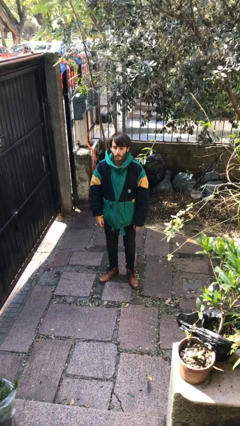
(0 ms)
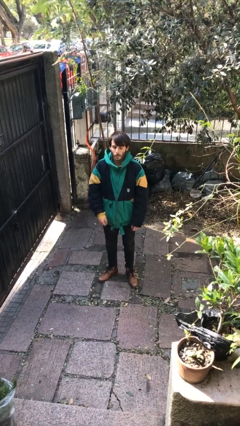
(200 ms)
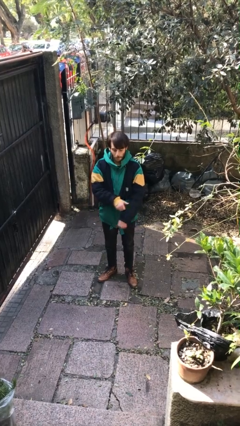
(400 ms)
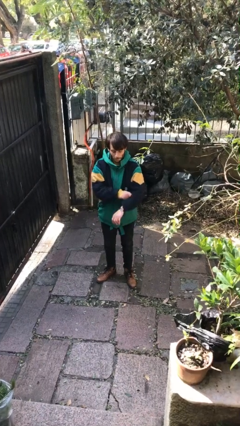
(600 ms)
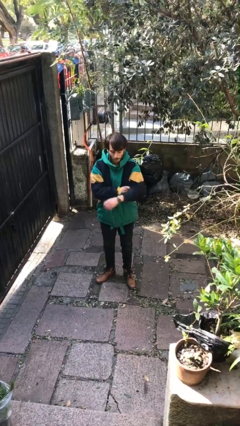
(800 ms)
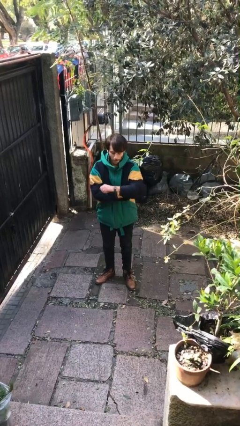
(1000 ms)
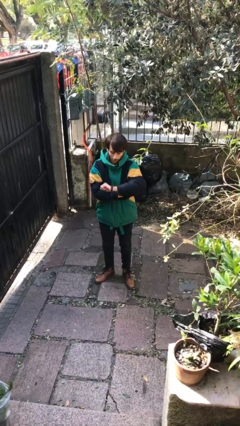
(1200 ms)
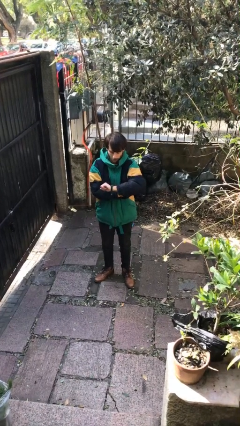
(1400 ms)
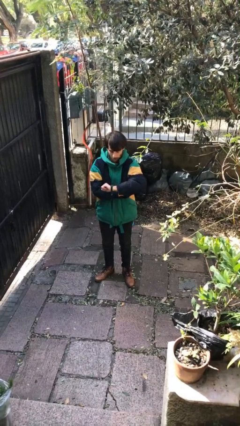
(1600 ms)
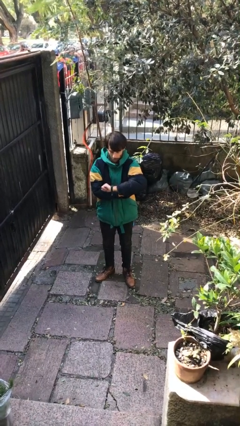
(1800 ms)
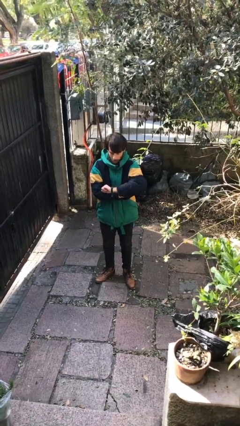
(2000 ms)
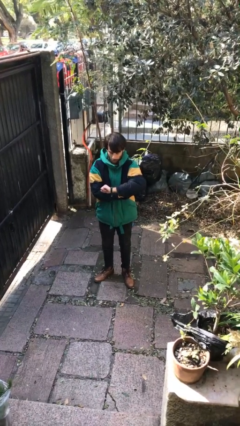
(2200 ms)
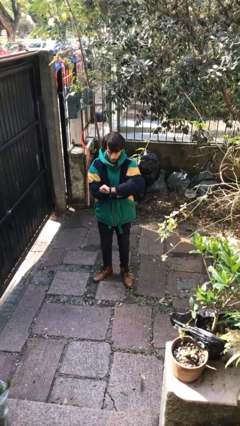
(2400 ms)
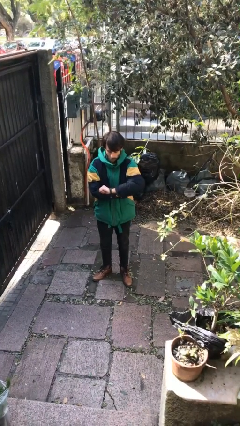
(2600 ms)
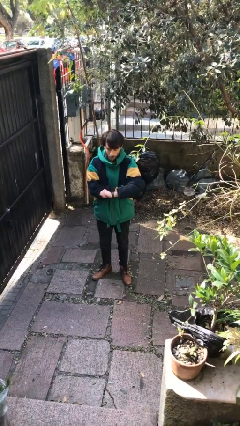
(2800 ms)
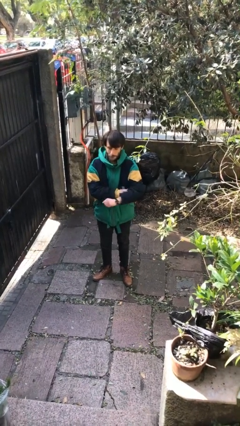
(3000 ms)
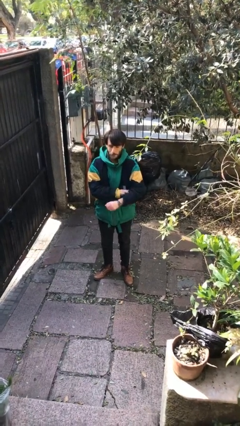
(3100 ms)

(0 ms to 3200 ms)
person looks at wristwatch

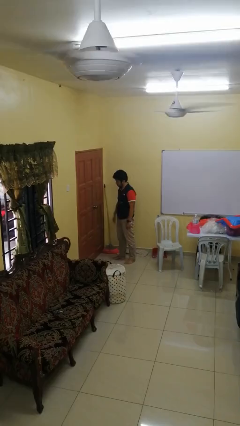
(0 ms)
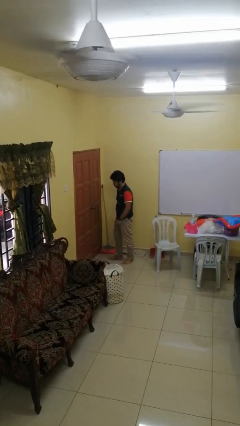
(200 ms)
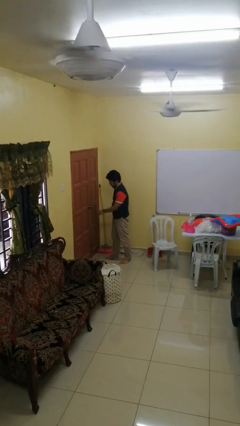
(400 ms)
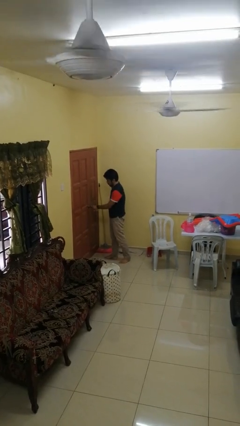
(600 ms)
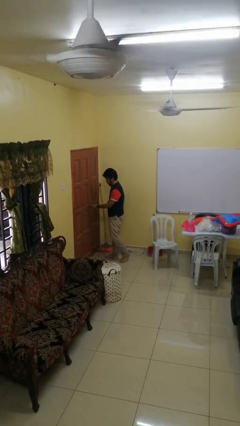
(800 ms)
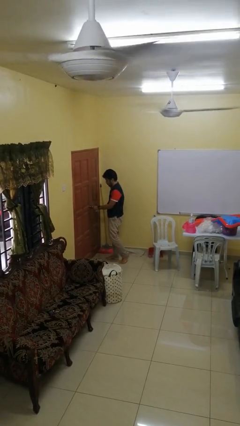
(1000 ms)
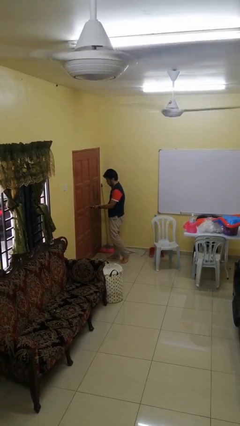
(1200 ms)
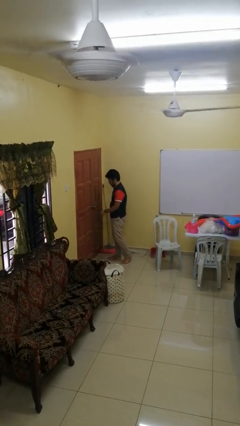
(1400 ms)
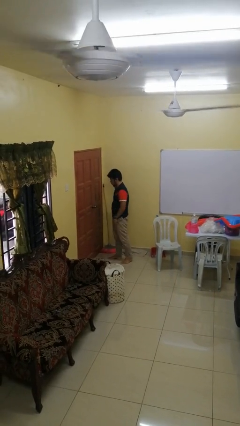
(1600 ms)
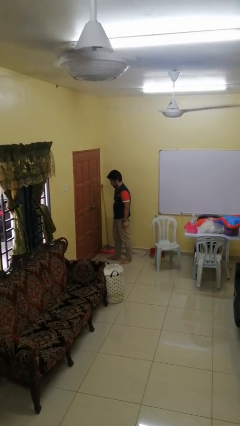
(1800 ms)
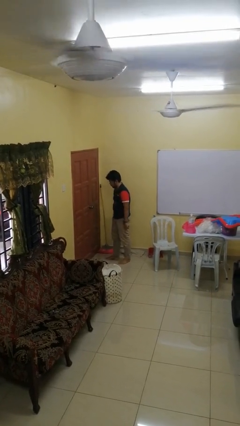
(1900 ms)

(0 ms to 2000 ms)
person locks door with keys

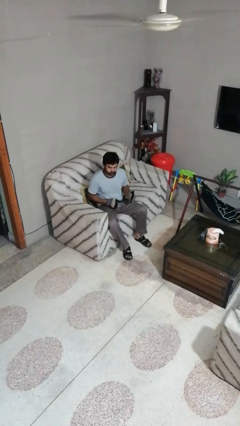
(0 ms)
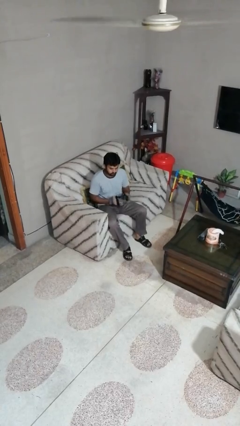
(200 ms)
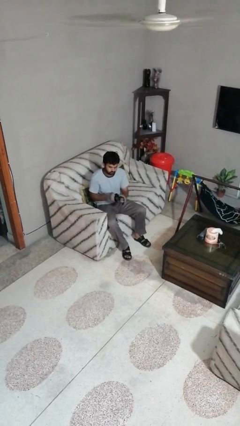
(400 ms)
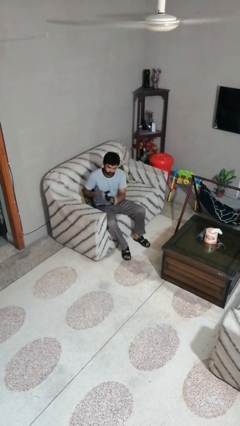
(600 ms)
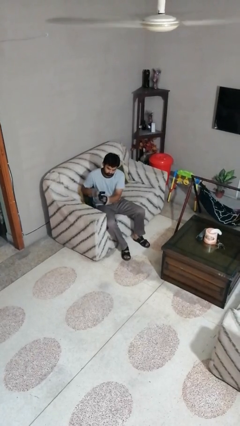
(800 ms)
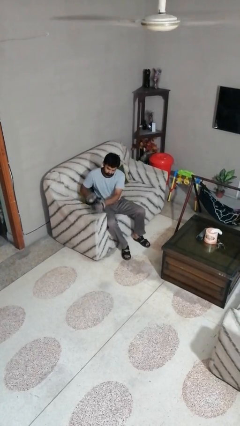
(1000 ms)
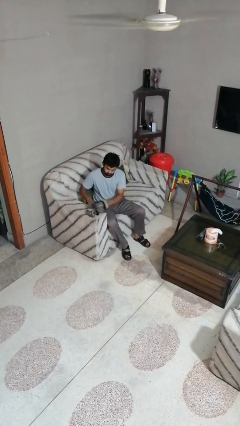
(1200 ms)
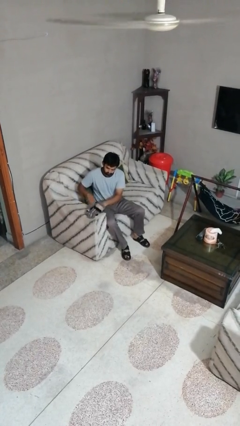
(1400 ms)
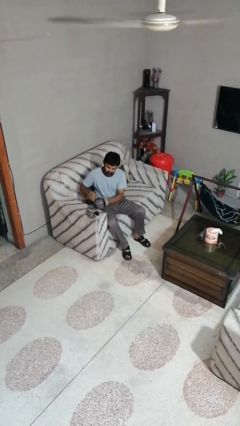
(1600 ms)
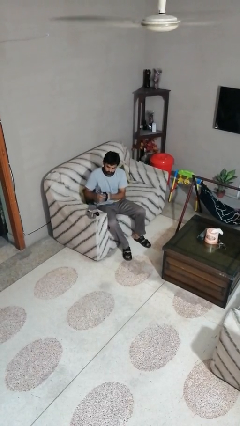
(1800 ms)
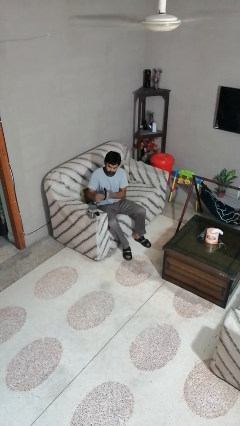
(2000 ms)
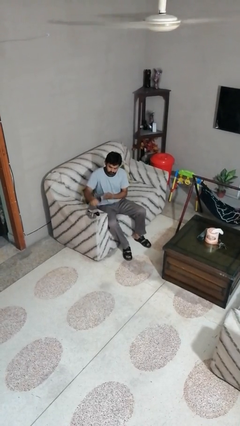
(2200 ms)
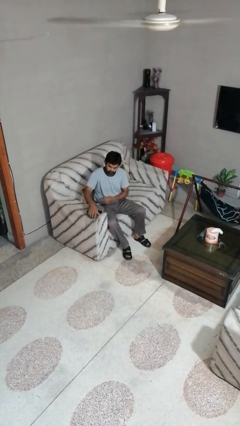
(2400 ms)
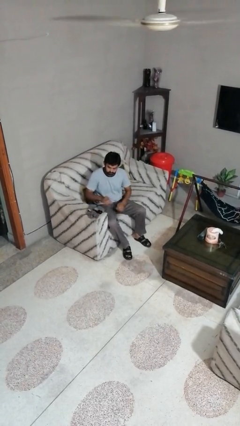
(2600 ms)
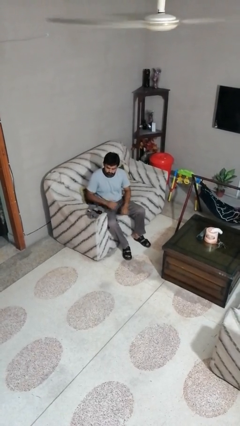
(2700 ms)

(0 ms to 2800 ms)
person takes off gloves

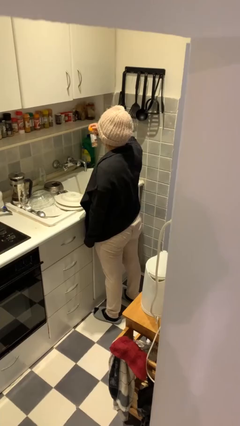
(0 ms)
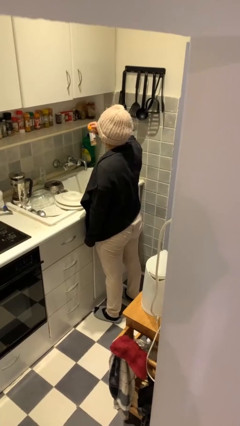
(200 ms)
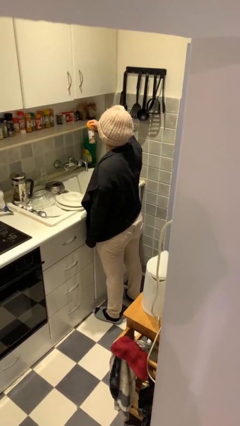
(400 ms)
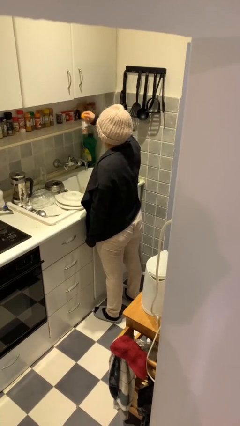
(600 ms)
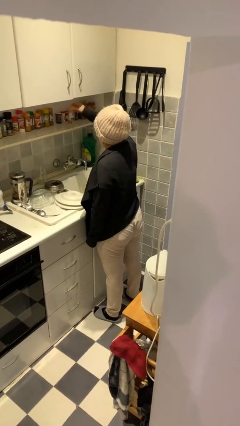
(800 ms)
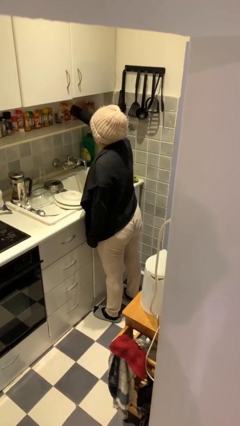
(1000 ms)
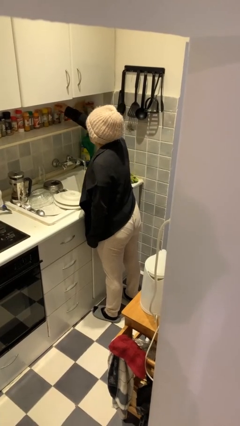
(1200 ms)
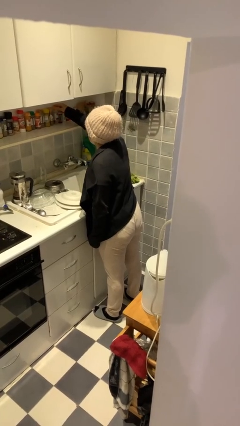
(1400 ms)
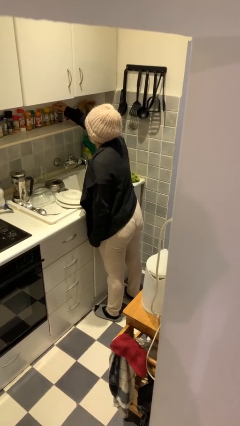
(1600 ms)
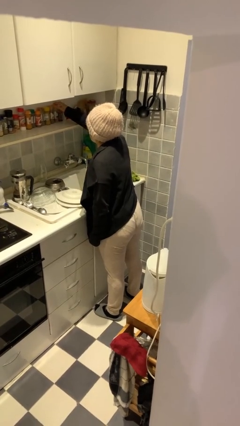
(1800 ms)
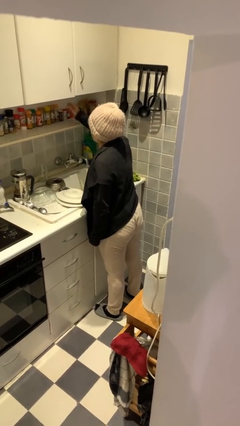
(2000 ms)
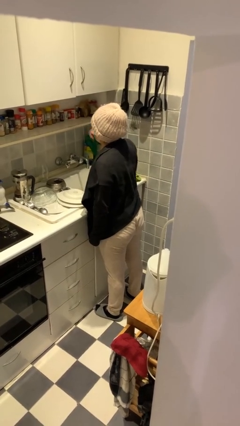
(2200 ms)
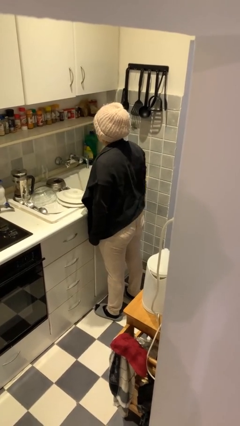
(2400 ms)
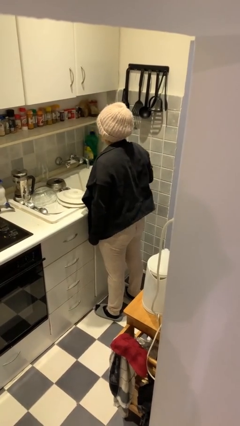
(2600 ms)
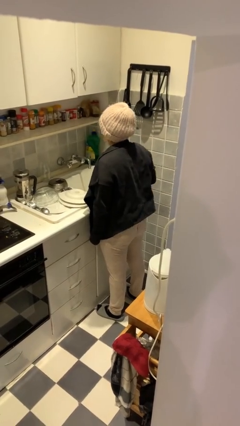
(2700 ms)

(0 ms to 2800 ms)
person puts down object on countertop

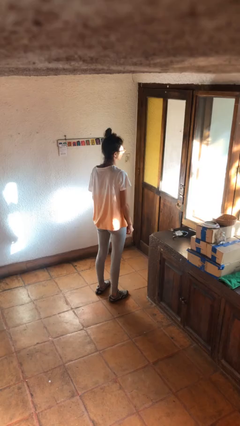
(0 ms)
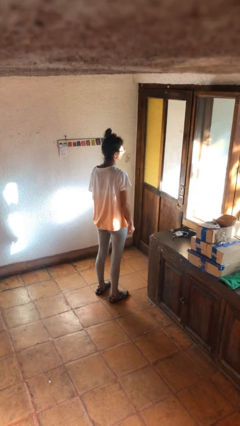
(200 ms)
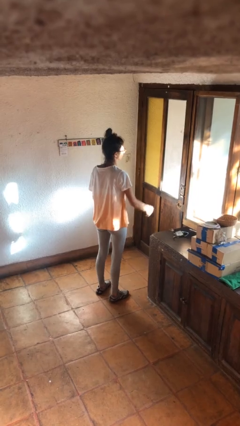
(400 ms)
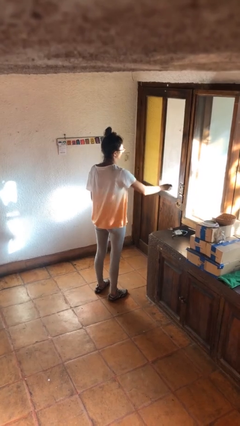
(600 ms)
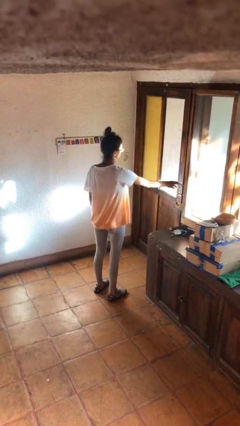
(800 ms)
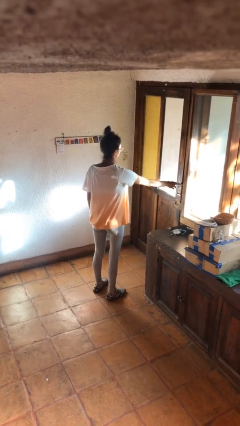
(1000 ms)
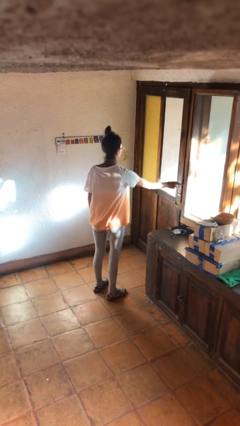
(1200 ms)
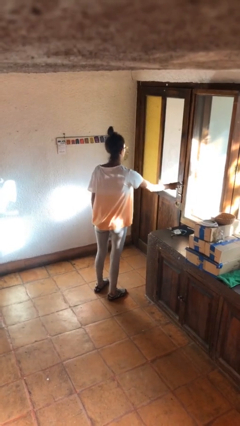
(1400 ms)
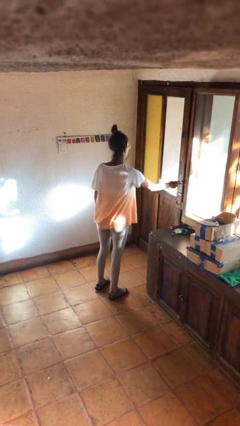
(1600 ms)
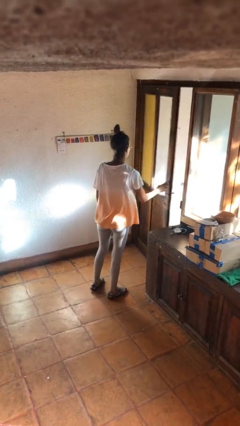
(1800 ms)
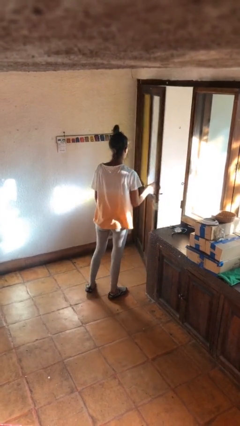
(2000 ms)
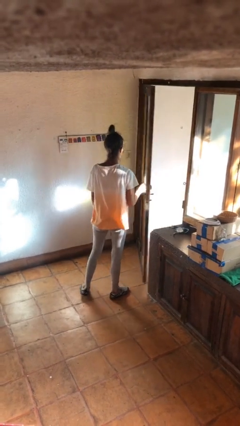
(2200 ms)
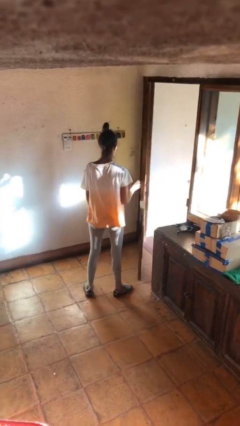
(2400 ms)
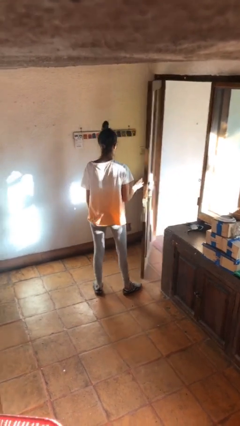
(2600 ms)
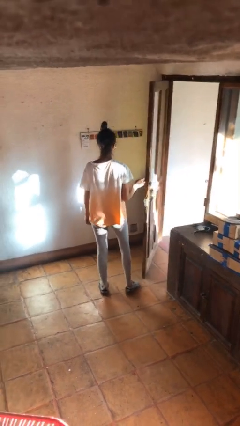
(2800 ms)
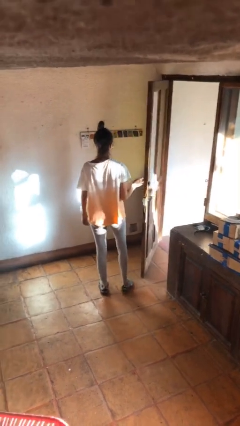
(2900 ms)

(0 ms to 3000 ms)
person opens facility door

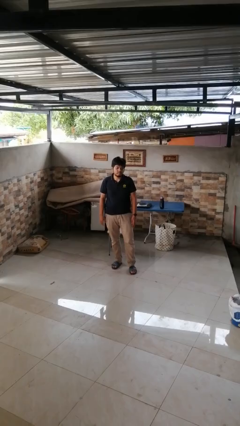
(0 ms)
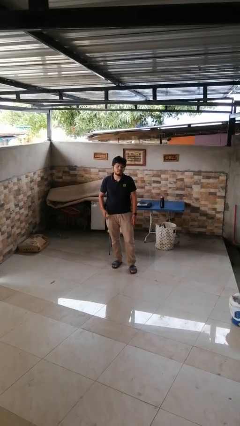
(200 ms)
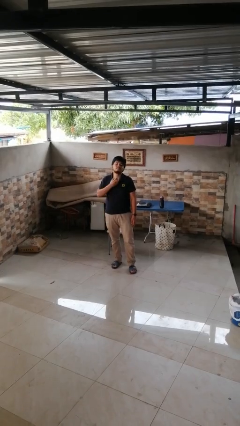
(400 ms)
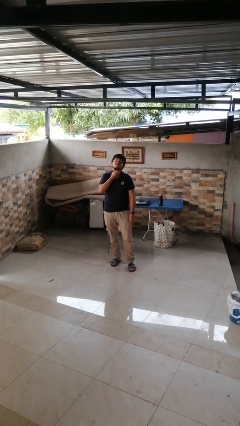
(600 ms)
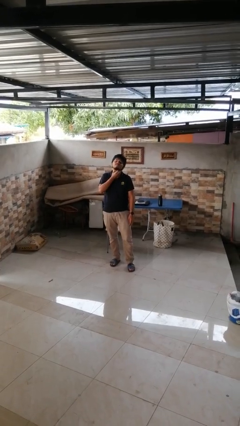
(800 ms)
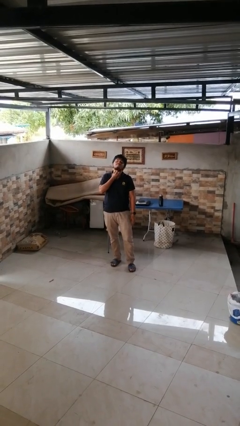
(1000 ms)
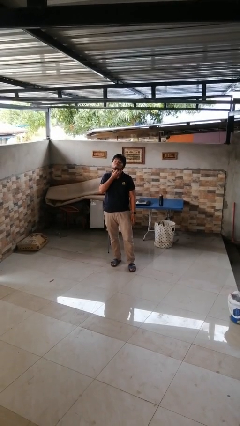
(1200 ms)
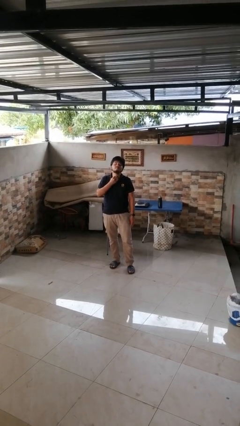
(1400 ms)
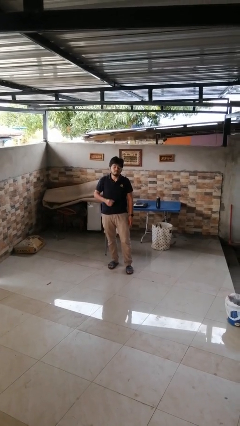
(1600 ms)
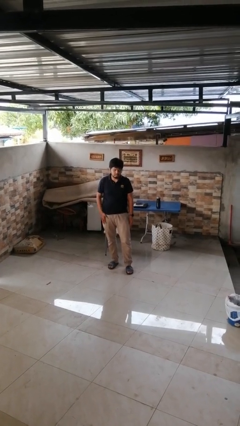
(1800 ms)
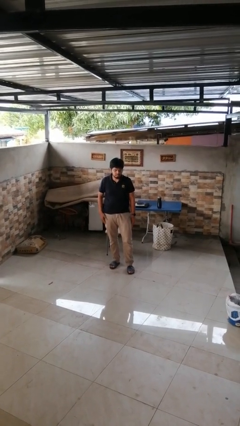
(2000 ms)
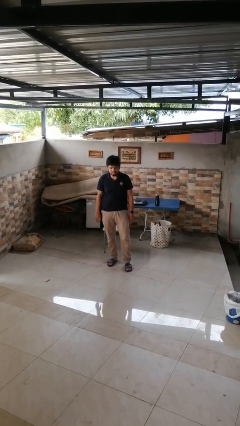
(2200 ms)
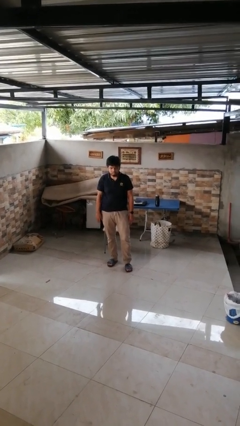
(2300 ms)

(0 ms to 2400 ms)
person scratches face

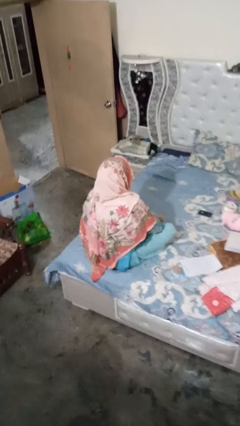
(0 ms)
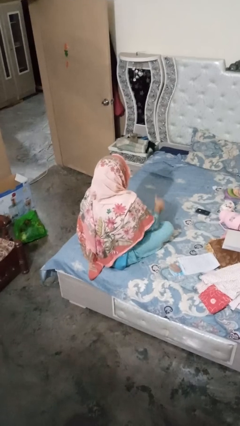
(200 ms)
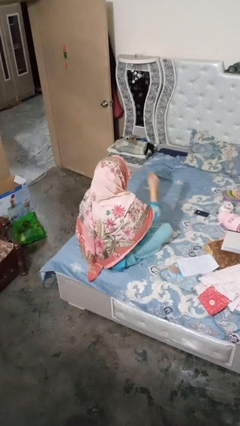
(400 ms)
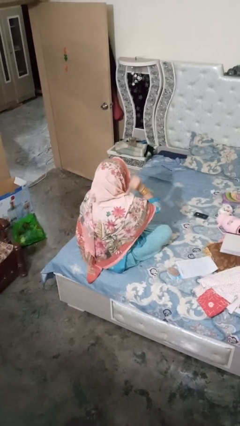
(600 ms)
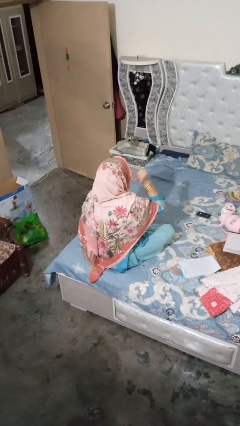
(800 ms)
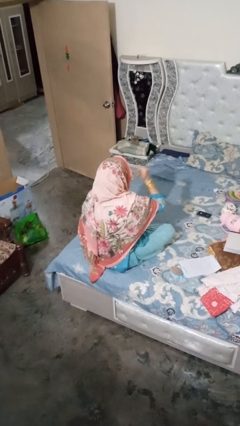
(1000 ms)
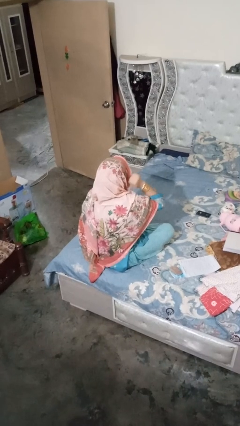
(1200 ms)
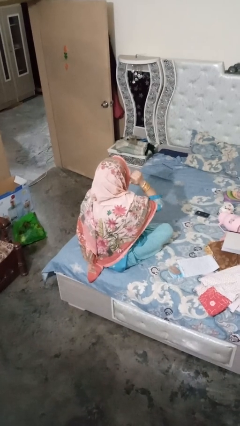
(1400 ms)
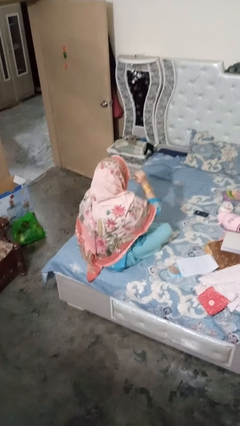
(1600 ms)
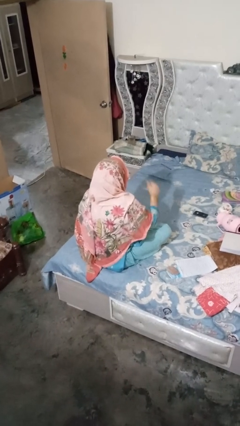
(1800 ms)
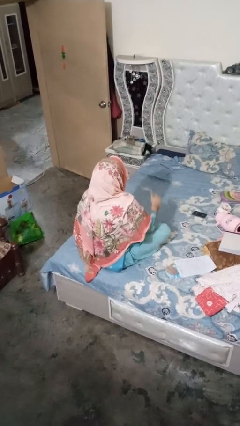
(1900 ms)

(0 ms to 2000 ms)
person gestures behind me
